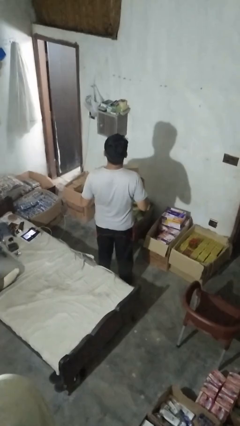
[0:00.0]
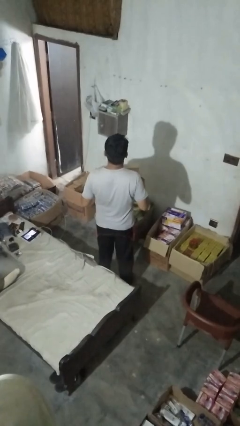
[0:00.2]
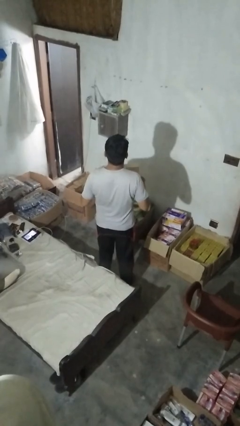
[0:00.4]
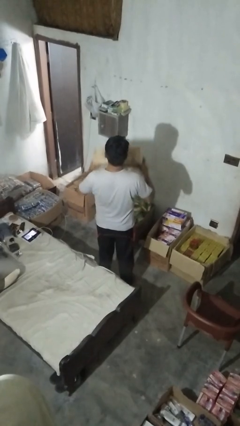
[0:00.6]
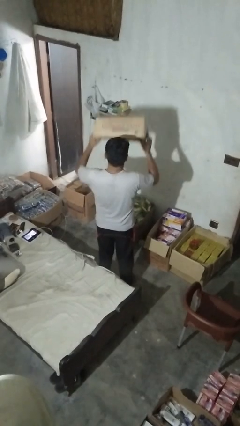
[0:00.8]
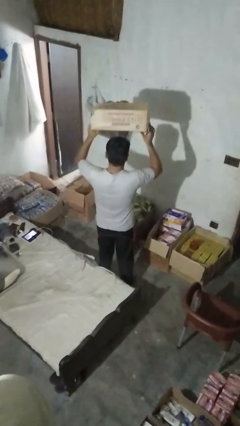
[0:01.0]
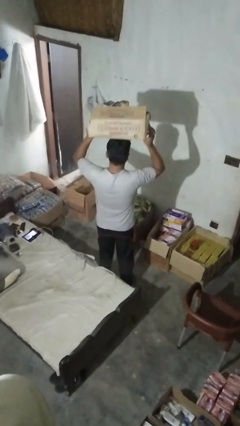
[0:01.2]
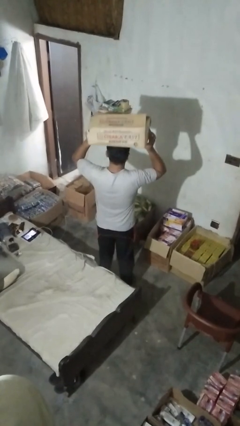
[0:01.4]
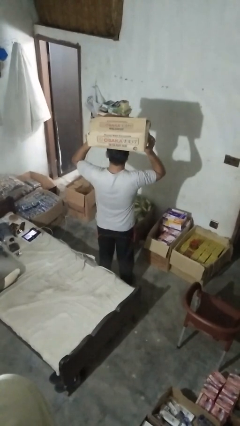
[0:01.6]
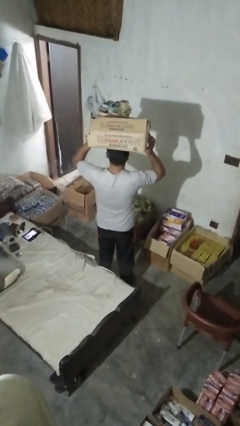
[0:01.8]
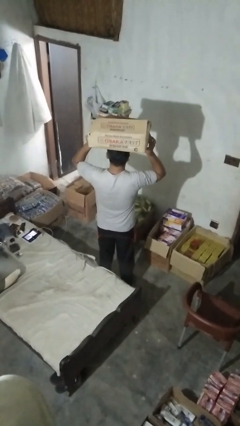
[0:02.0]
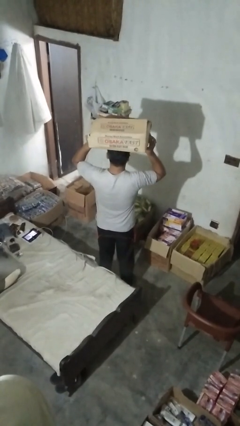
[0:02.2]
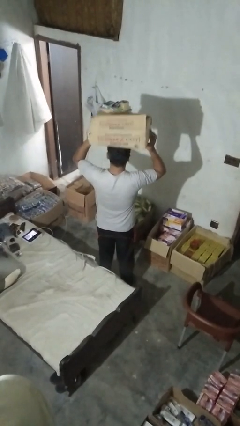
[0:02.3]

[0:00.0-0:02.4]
person holds object above head

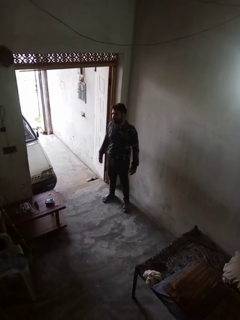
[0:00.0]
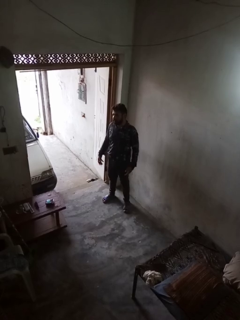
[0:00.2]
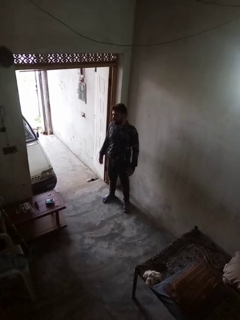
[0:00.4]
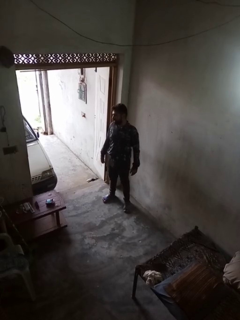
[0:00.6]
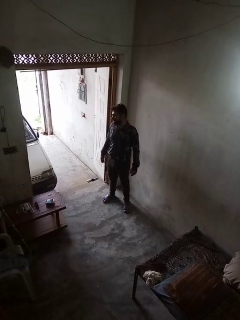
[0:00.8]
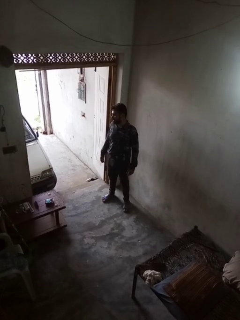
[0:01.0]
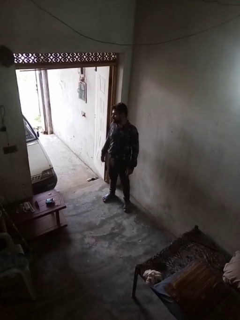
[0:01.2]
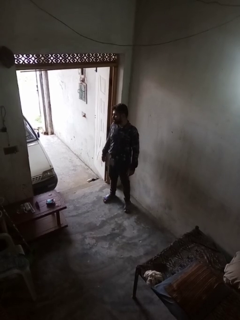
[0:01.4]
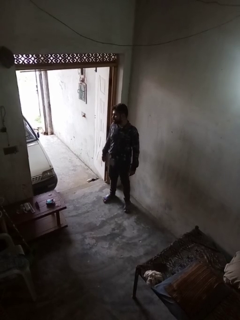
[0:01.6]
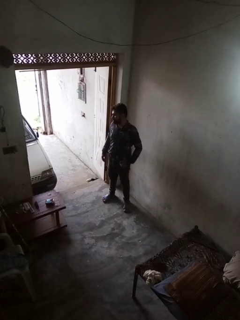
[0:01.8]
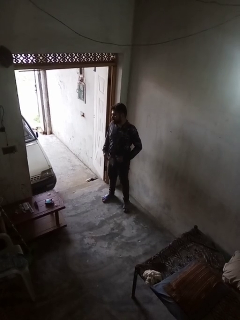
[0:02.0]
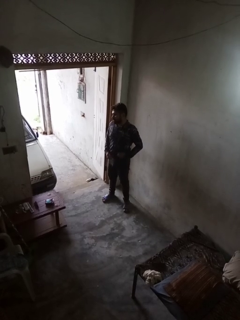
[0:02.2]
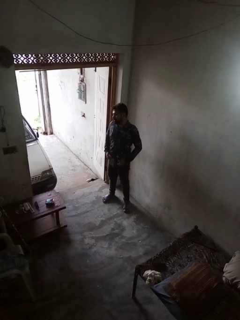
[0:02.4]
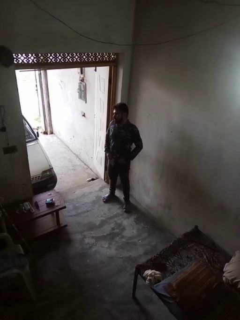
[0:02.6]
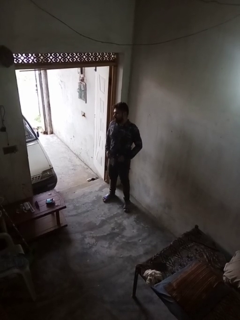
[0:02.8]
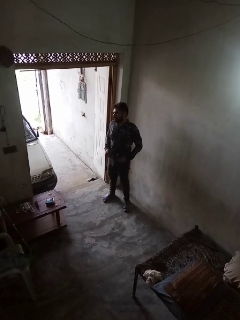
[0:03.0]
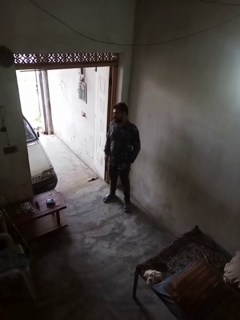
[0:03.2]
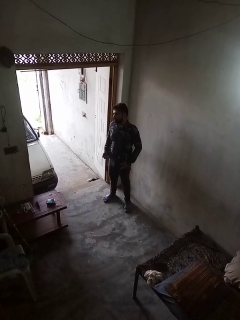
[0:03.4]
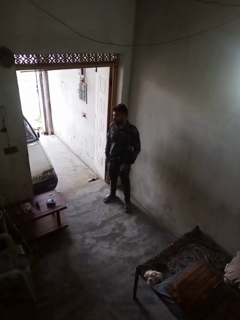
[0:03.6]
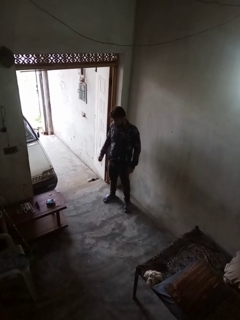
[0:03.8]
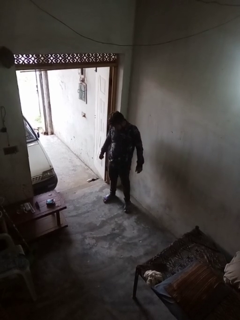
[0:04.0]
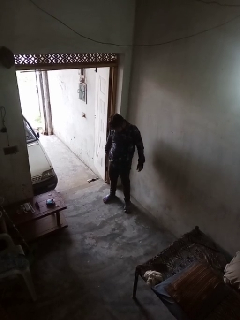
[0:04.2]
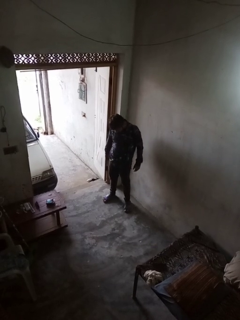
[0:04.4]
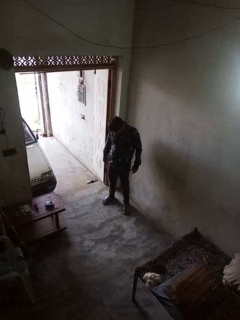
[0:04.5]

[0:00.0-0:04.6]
person untucks shirt

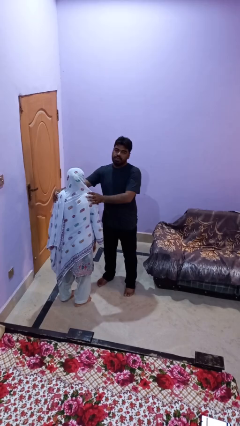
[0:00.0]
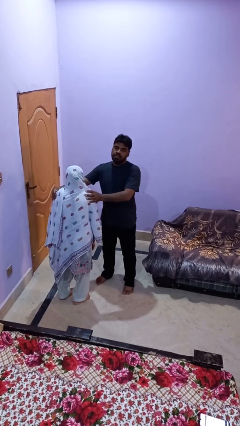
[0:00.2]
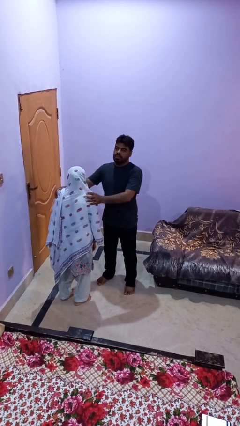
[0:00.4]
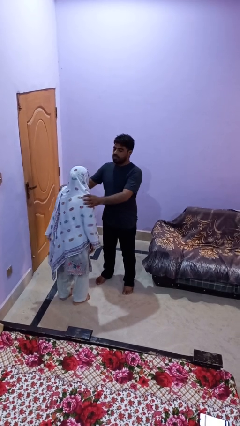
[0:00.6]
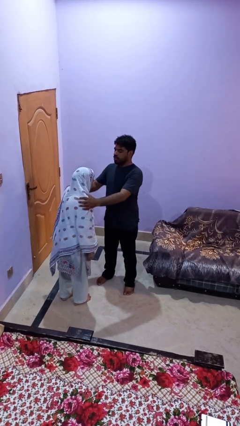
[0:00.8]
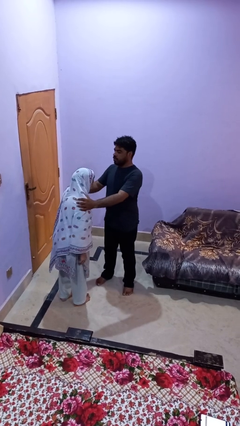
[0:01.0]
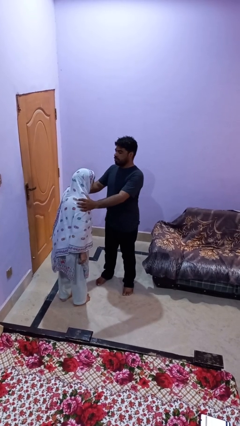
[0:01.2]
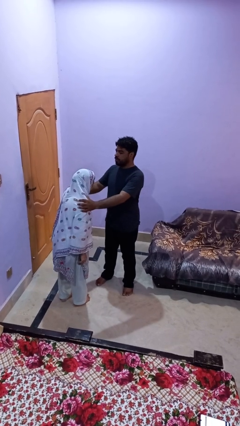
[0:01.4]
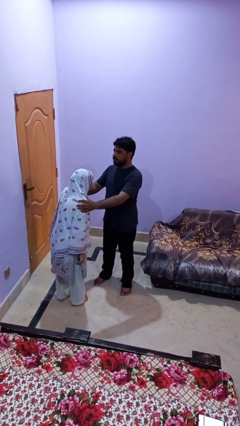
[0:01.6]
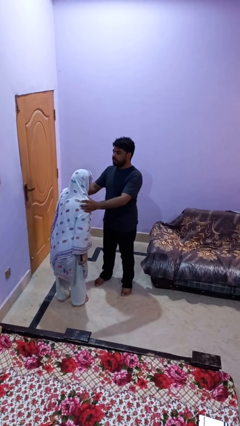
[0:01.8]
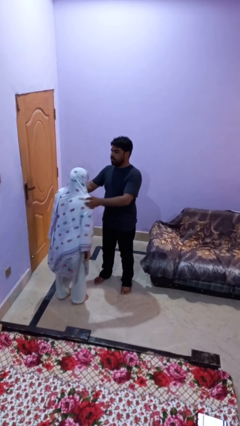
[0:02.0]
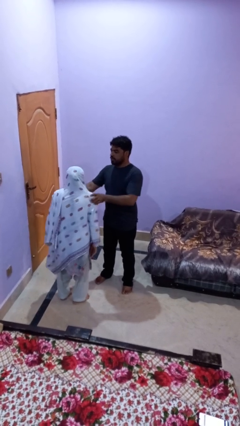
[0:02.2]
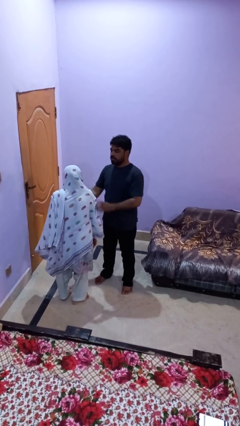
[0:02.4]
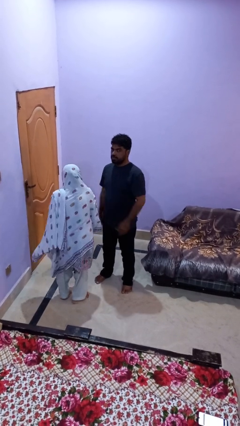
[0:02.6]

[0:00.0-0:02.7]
person spins person around

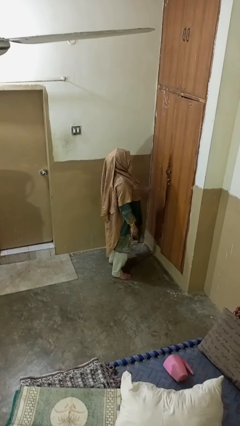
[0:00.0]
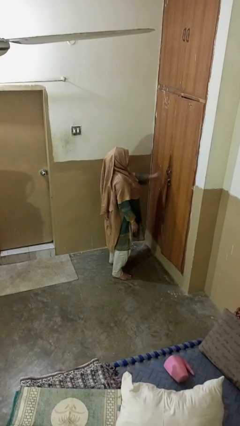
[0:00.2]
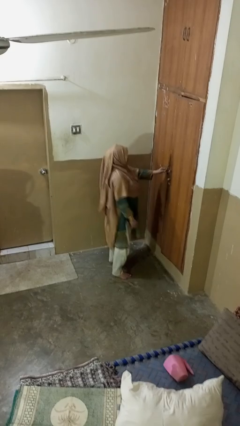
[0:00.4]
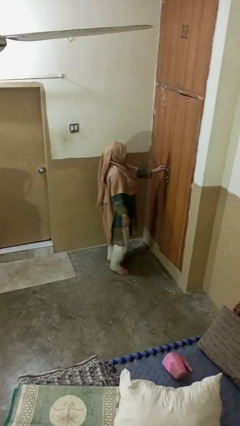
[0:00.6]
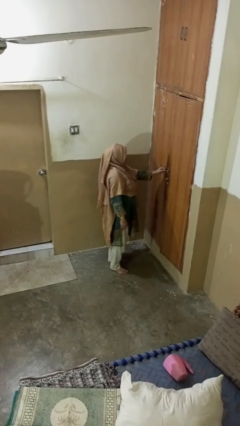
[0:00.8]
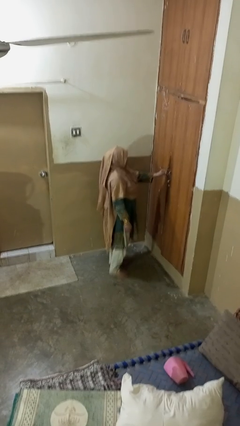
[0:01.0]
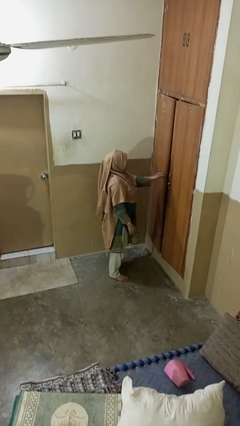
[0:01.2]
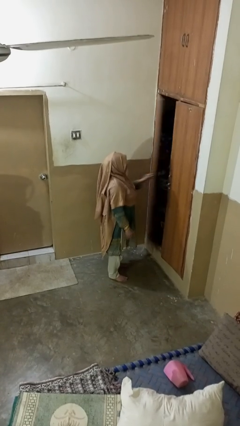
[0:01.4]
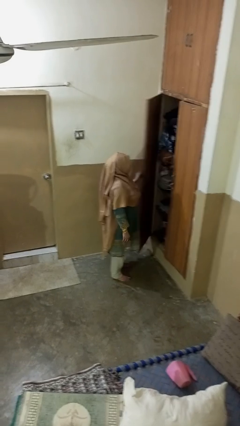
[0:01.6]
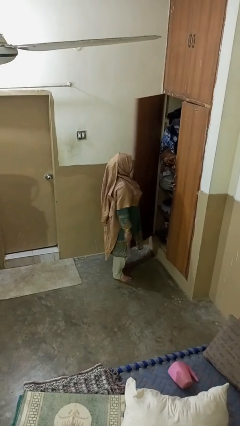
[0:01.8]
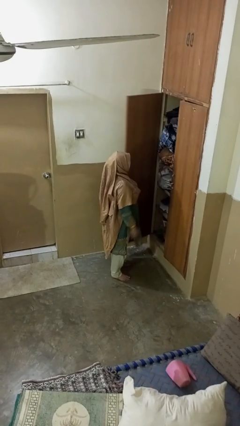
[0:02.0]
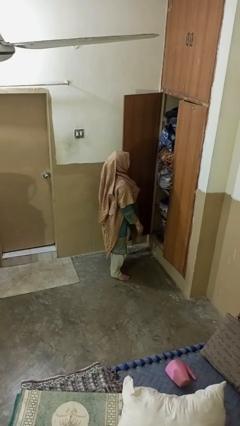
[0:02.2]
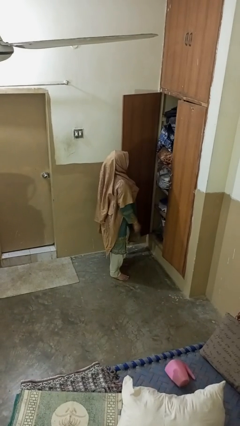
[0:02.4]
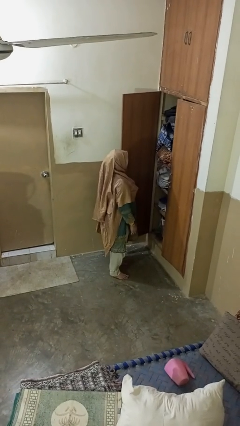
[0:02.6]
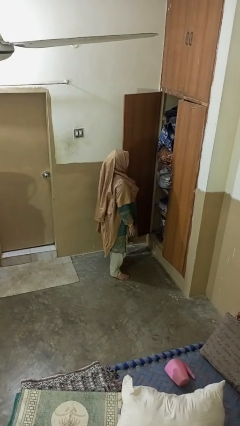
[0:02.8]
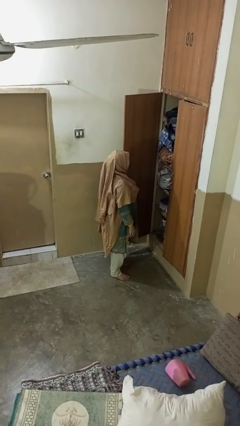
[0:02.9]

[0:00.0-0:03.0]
person opens closet door

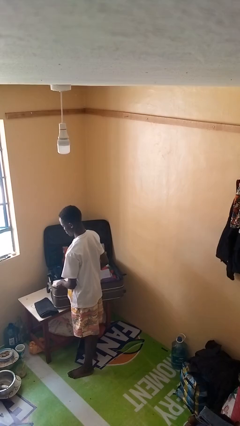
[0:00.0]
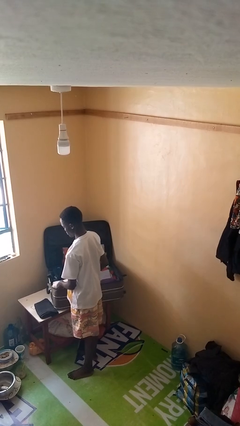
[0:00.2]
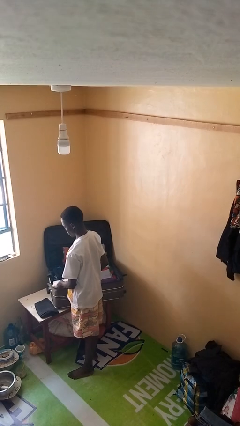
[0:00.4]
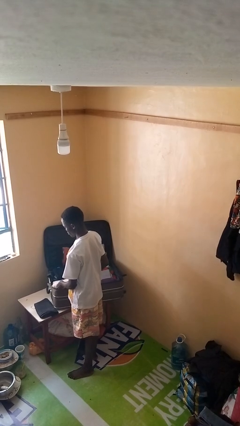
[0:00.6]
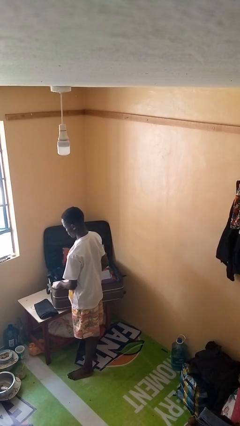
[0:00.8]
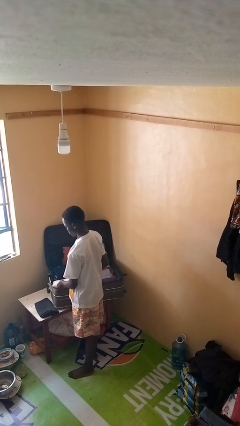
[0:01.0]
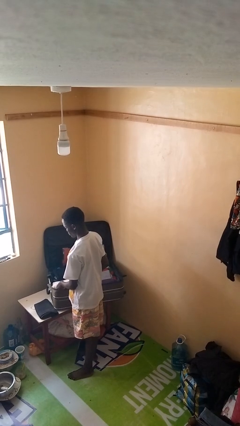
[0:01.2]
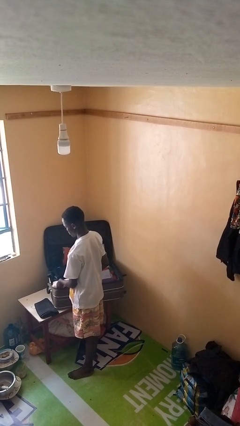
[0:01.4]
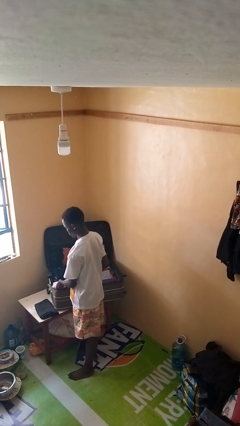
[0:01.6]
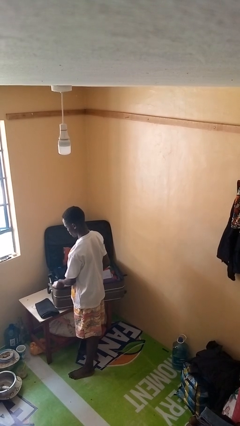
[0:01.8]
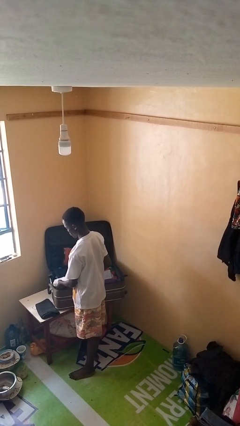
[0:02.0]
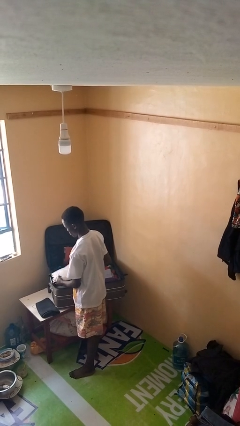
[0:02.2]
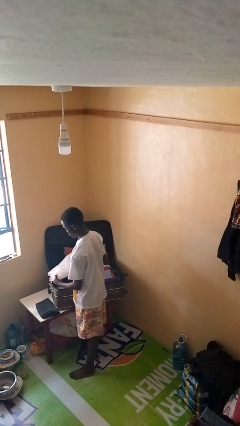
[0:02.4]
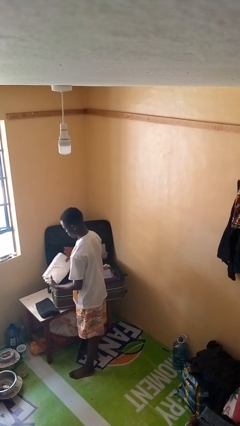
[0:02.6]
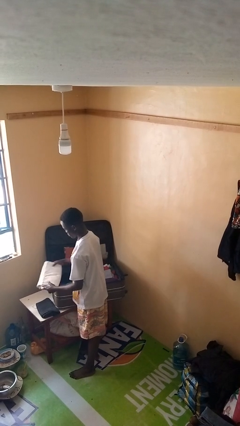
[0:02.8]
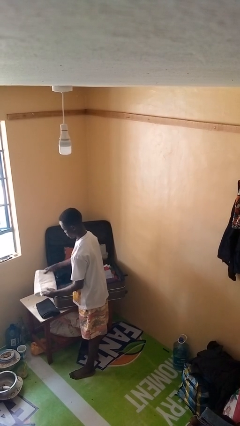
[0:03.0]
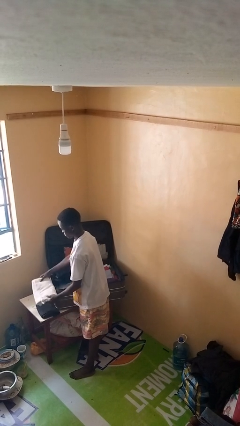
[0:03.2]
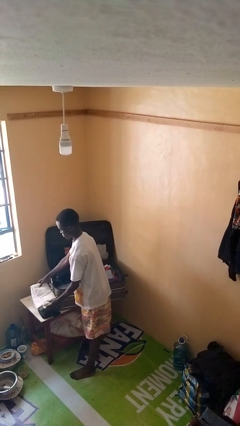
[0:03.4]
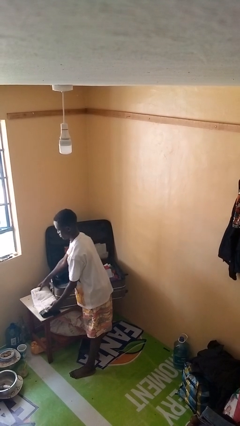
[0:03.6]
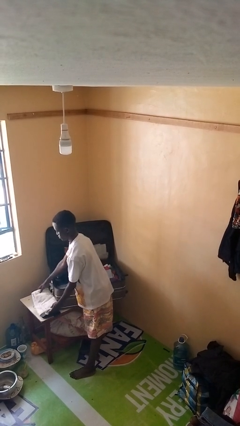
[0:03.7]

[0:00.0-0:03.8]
person unloads clothes from suitcase

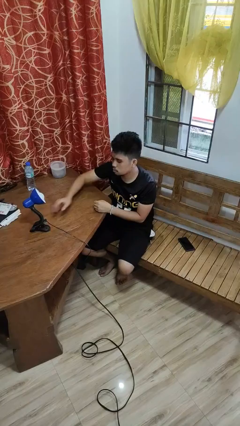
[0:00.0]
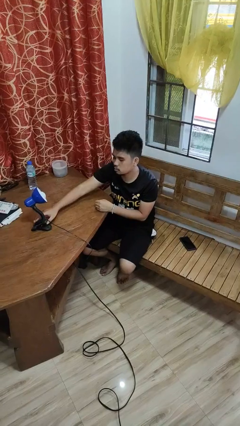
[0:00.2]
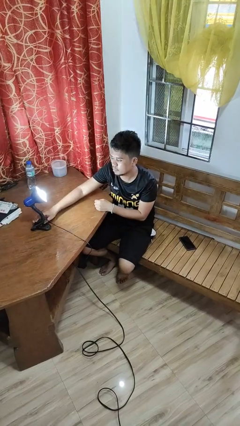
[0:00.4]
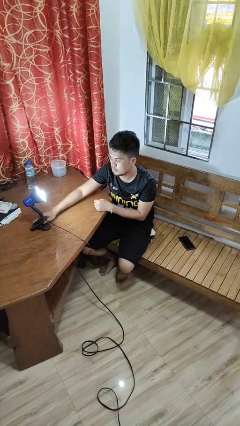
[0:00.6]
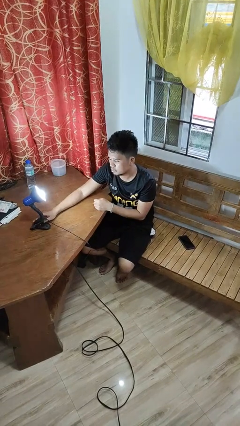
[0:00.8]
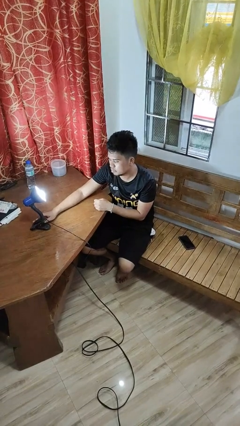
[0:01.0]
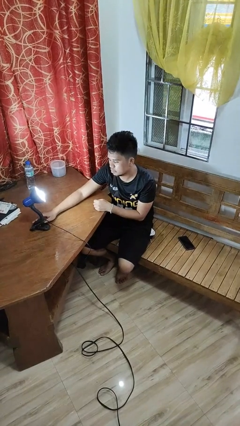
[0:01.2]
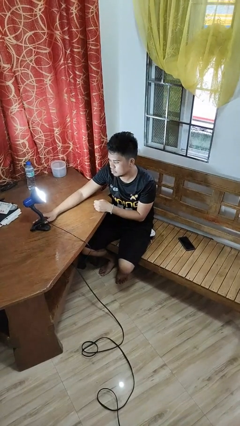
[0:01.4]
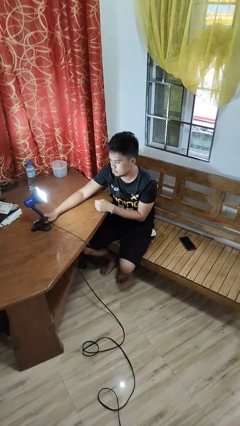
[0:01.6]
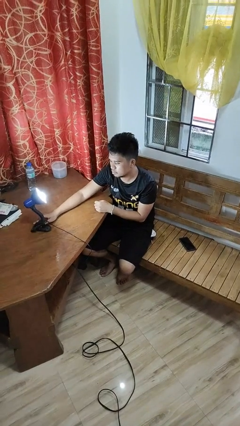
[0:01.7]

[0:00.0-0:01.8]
person turns on lamp
